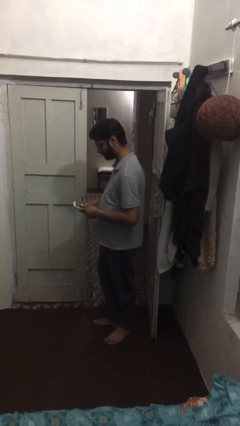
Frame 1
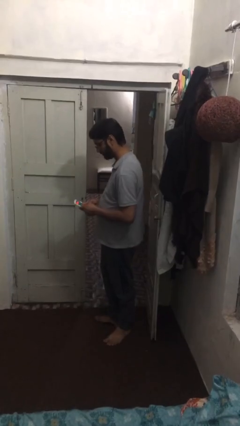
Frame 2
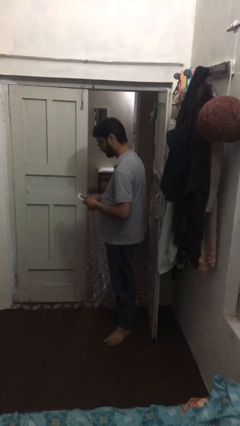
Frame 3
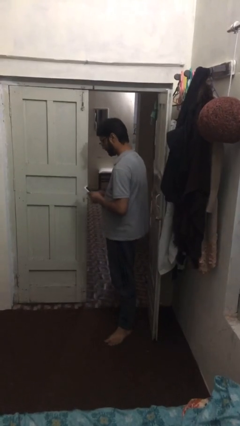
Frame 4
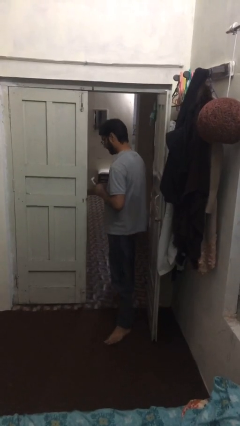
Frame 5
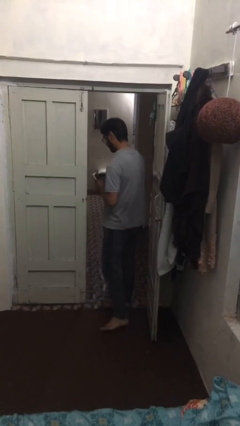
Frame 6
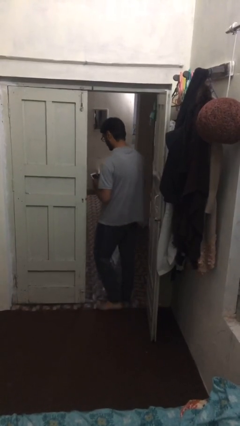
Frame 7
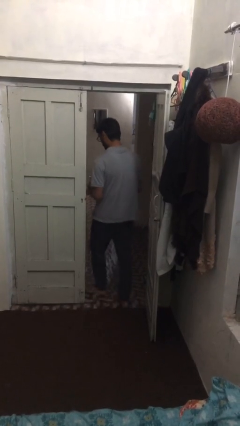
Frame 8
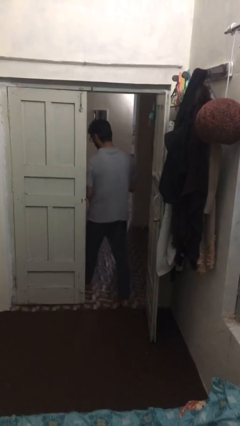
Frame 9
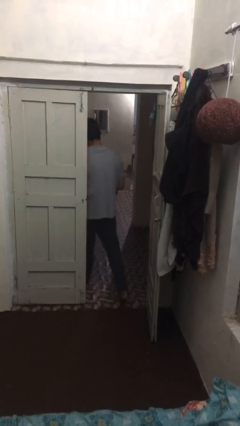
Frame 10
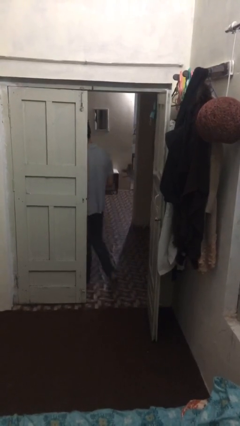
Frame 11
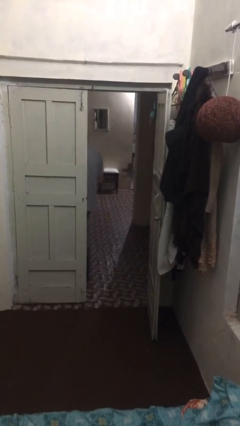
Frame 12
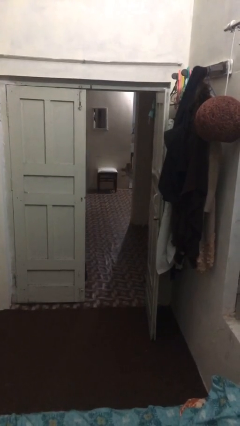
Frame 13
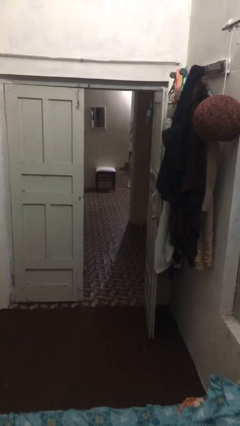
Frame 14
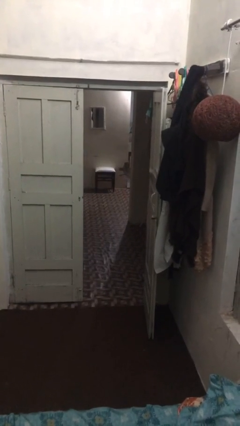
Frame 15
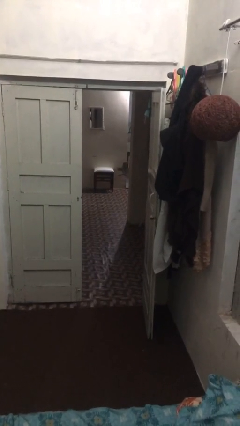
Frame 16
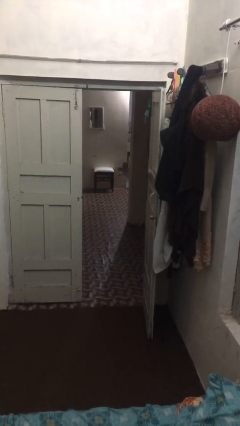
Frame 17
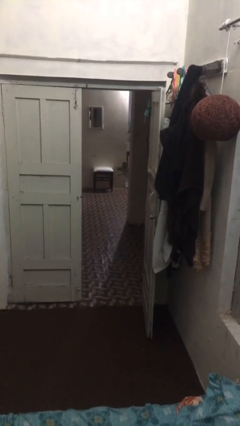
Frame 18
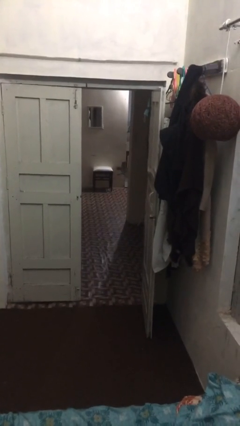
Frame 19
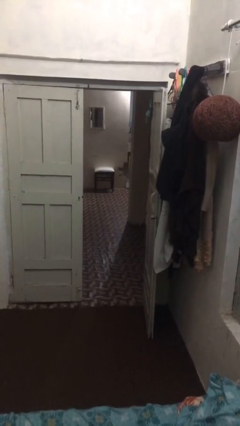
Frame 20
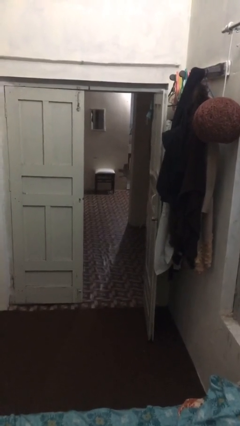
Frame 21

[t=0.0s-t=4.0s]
person exits scene through structure

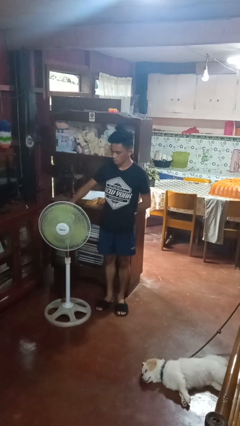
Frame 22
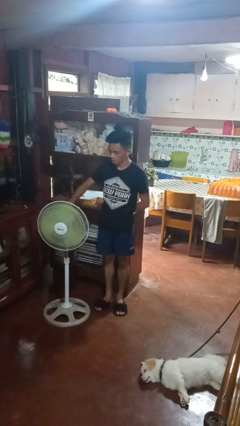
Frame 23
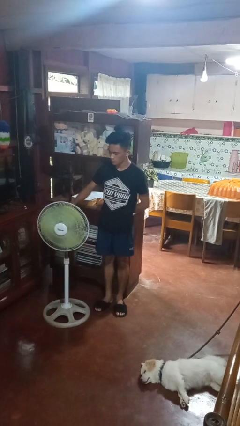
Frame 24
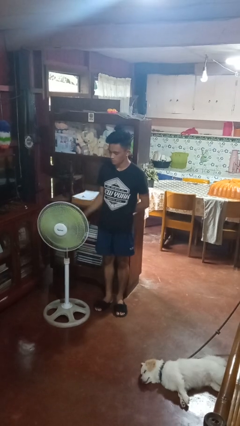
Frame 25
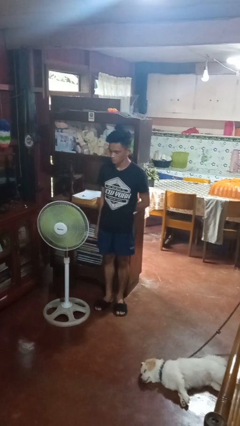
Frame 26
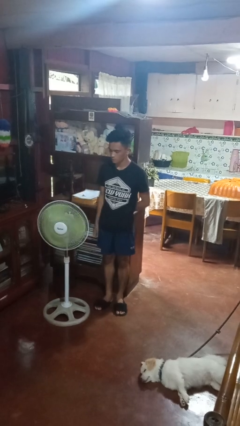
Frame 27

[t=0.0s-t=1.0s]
person turns off fan

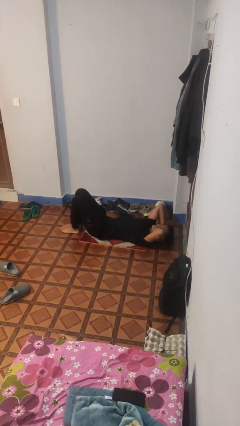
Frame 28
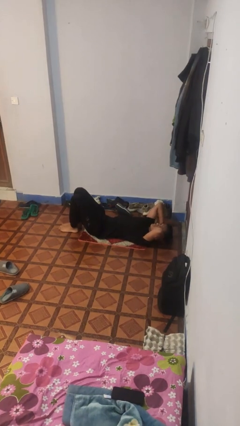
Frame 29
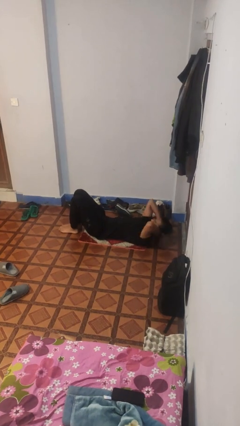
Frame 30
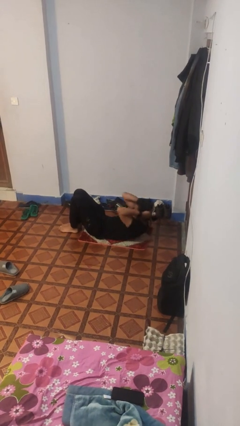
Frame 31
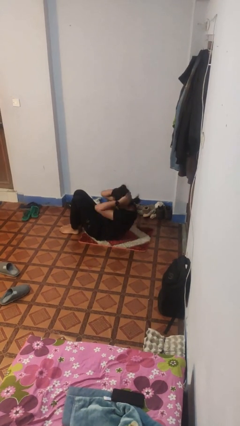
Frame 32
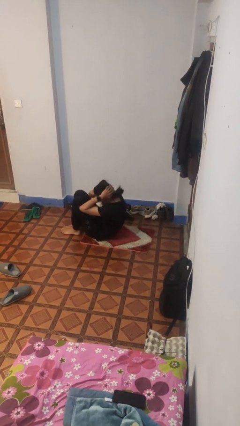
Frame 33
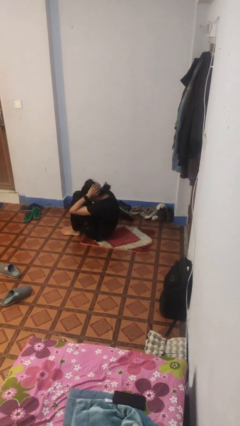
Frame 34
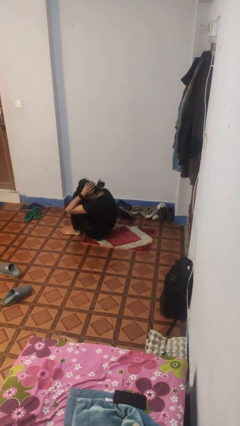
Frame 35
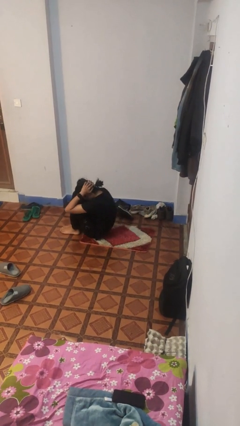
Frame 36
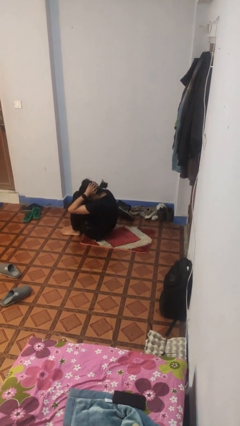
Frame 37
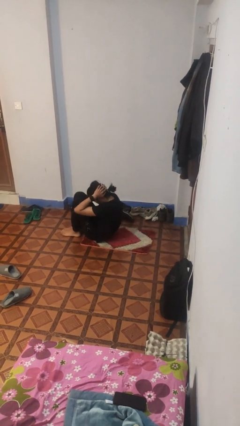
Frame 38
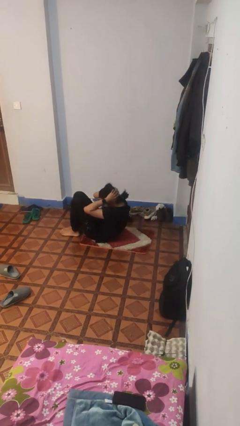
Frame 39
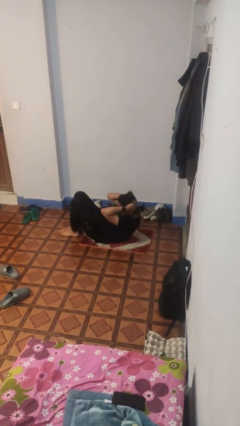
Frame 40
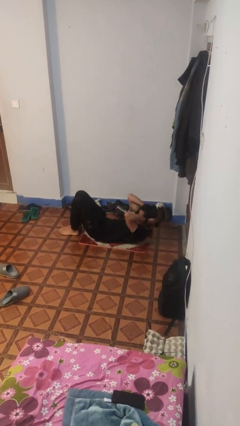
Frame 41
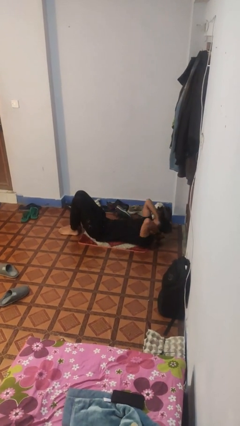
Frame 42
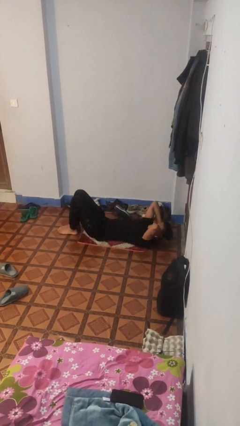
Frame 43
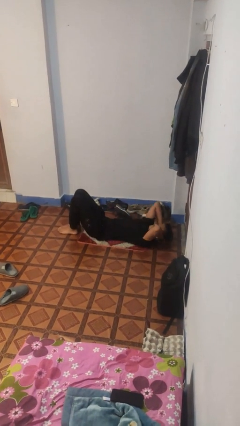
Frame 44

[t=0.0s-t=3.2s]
person exercises with situp

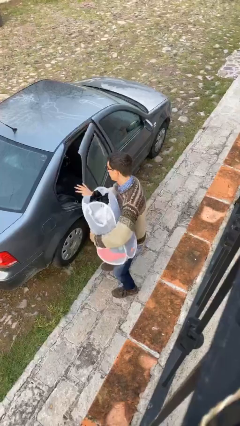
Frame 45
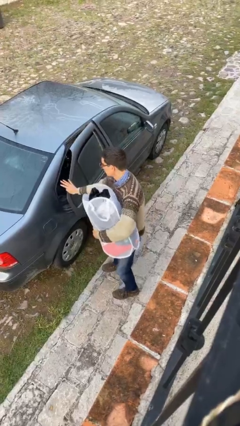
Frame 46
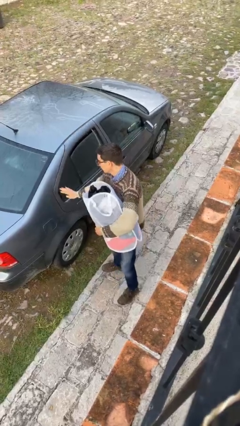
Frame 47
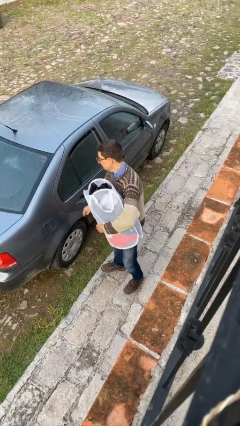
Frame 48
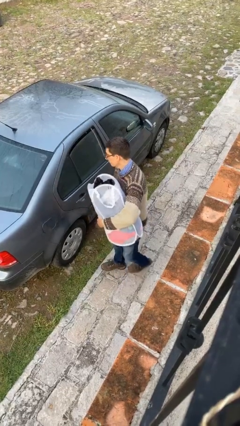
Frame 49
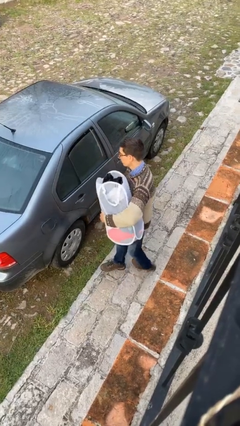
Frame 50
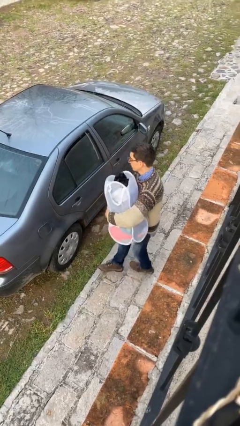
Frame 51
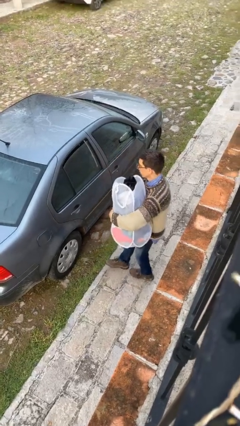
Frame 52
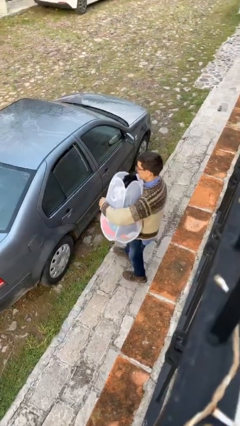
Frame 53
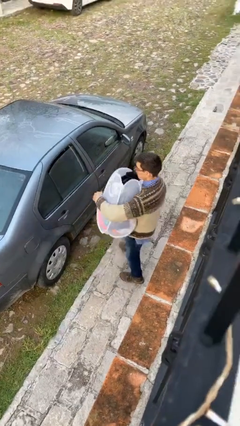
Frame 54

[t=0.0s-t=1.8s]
person closes car door

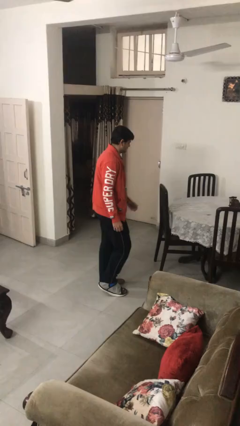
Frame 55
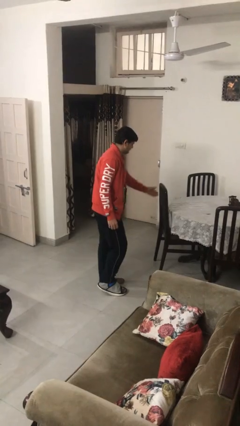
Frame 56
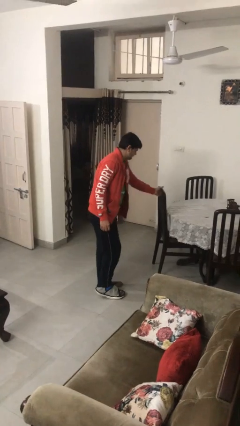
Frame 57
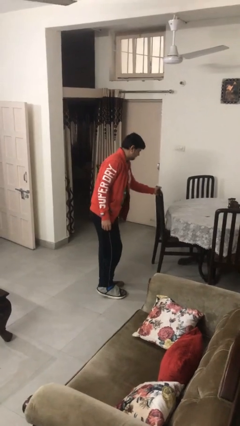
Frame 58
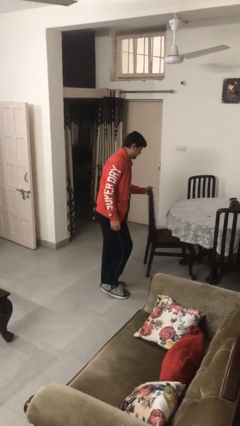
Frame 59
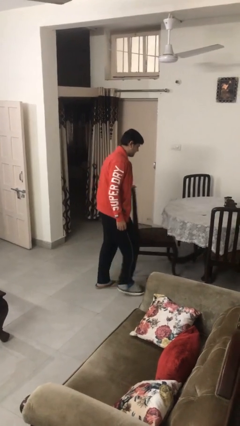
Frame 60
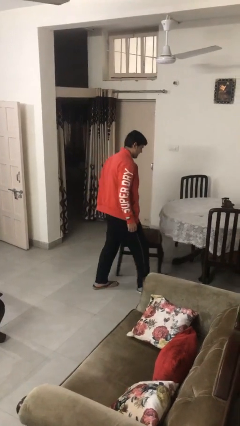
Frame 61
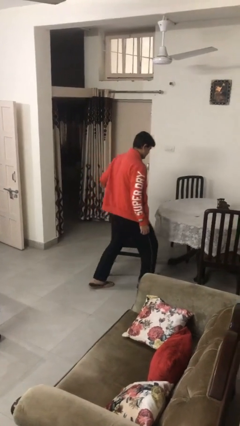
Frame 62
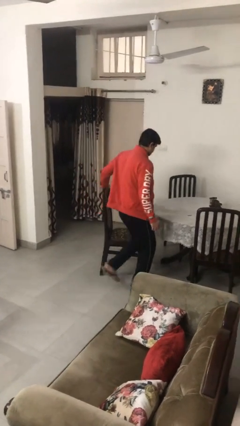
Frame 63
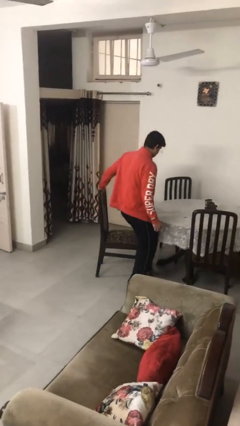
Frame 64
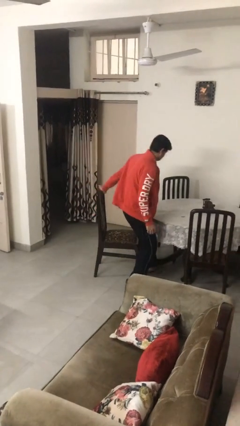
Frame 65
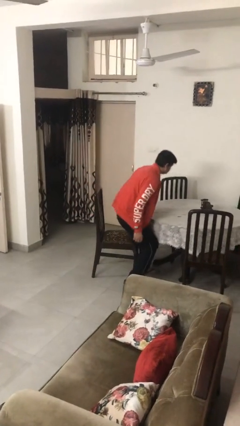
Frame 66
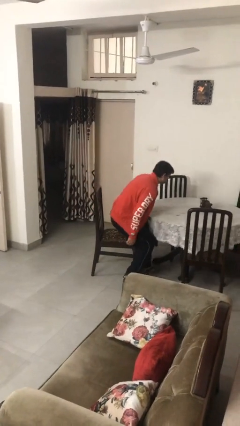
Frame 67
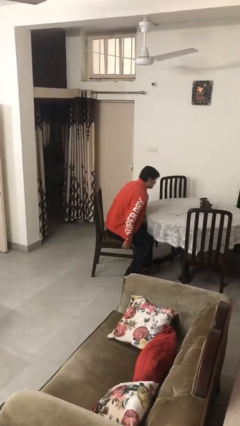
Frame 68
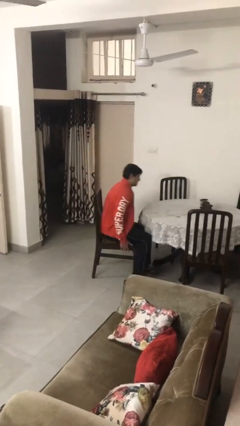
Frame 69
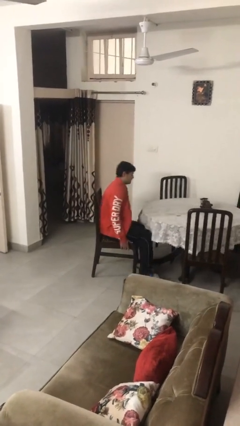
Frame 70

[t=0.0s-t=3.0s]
person sits down

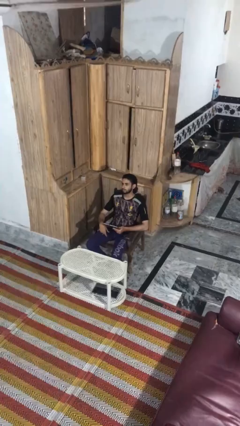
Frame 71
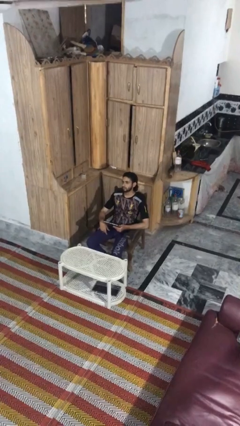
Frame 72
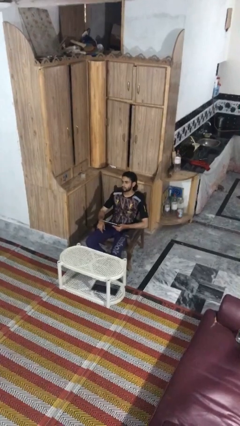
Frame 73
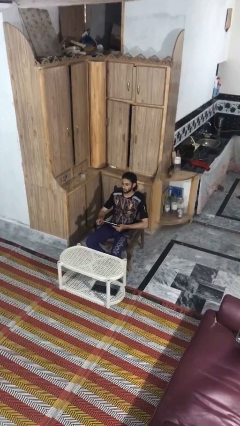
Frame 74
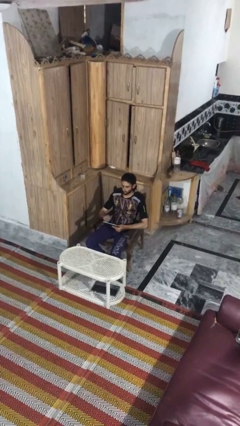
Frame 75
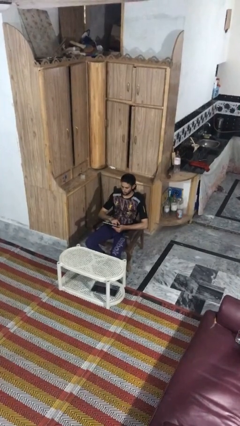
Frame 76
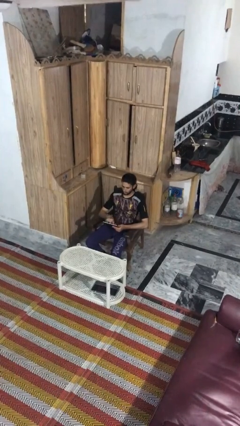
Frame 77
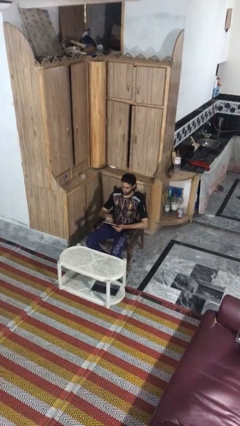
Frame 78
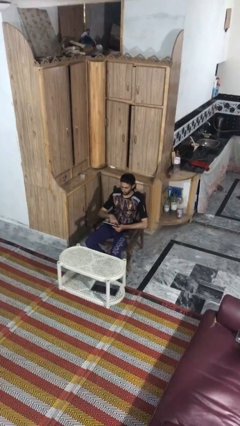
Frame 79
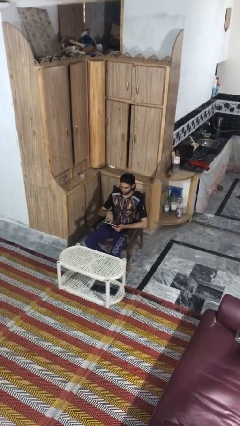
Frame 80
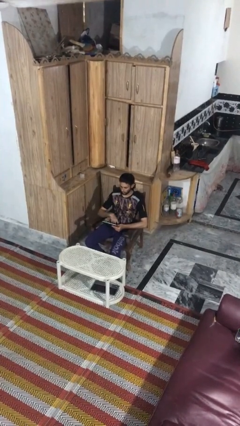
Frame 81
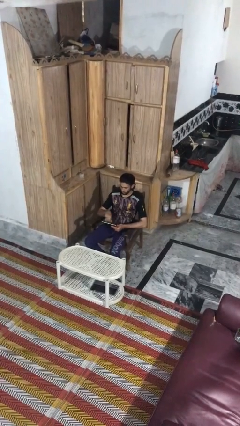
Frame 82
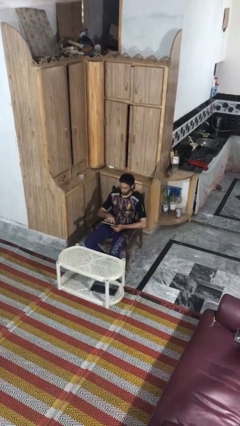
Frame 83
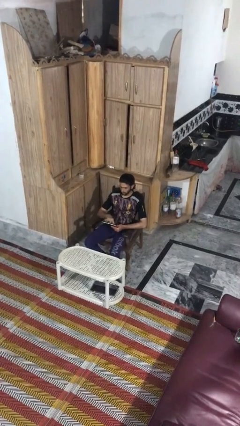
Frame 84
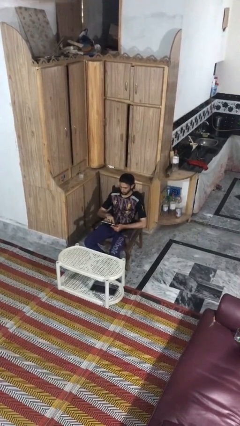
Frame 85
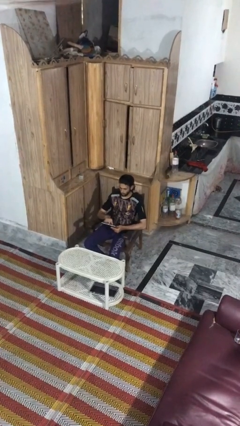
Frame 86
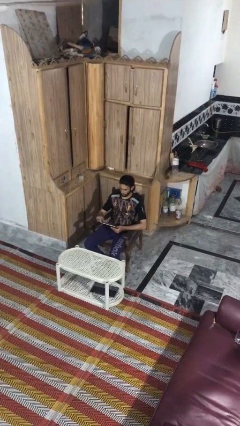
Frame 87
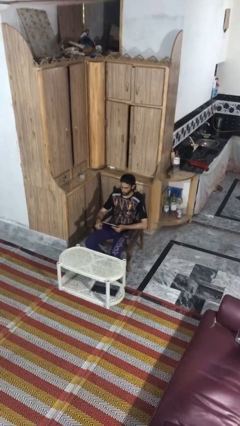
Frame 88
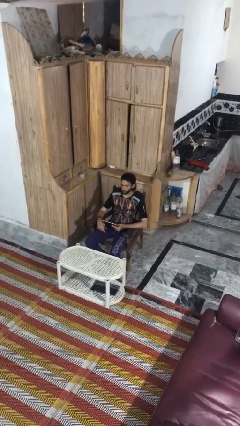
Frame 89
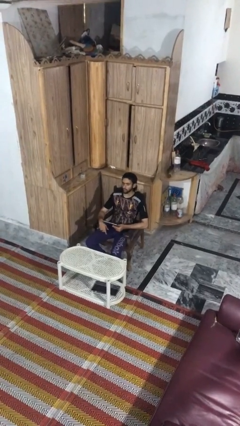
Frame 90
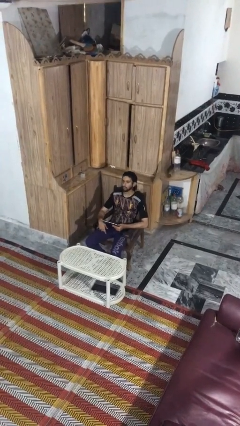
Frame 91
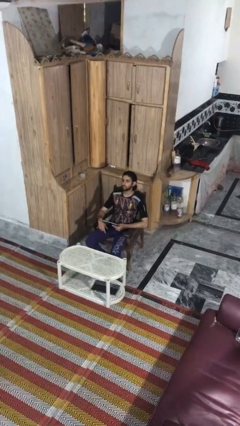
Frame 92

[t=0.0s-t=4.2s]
person interacts with tablet

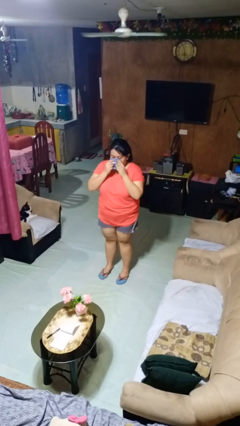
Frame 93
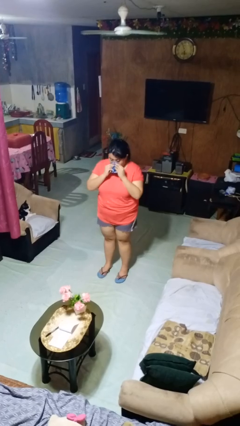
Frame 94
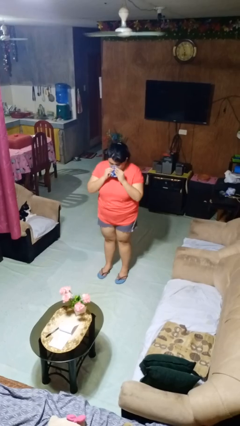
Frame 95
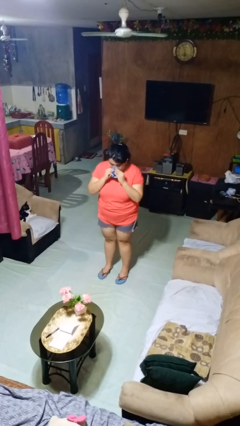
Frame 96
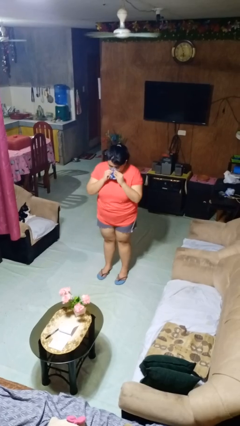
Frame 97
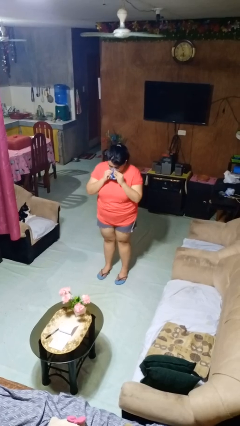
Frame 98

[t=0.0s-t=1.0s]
person blows nose
